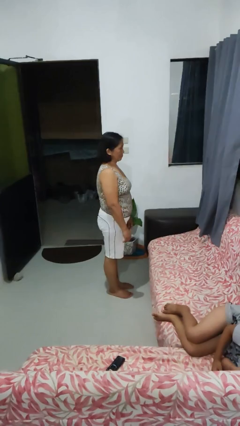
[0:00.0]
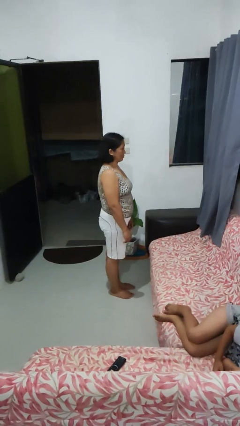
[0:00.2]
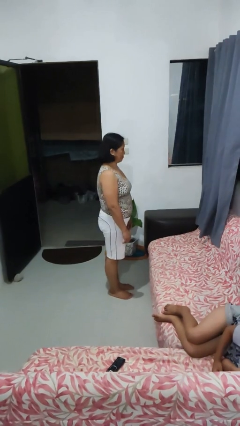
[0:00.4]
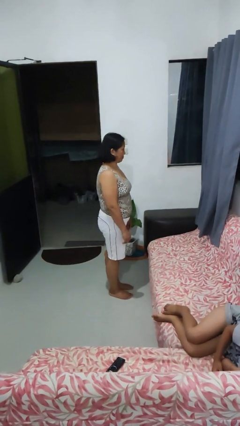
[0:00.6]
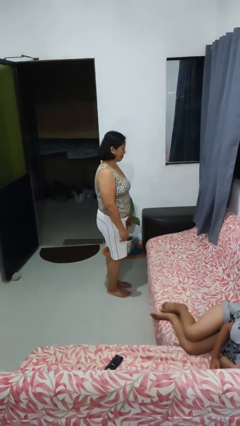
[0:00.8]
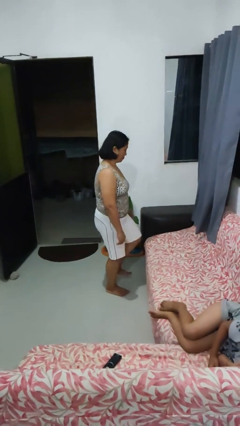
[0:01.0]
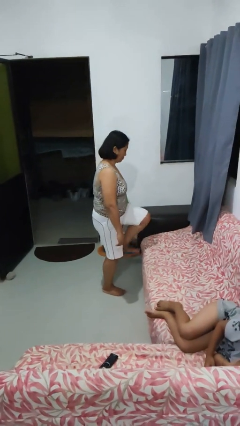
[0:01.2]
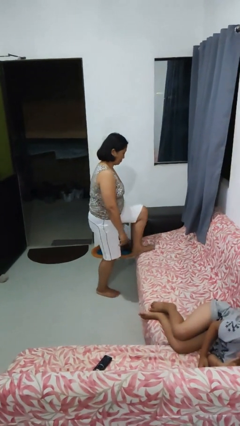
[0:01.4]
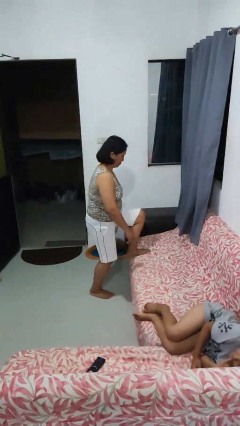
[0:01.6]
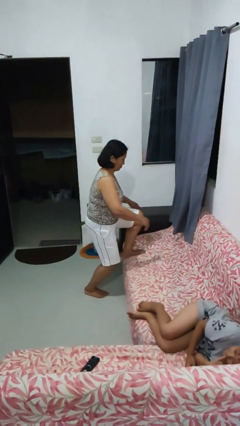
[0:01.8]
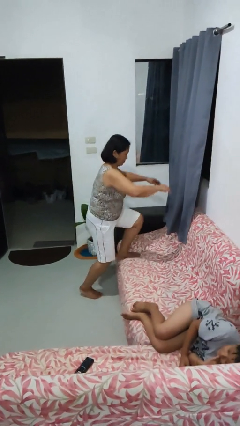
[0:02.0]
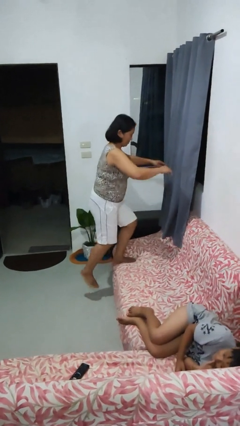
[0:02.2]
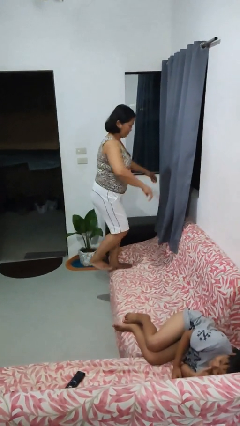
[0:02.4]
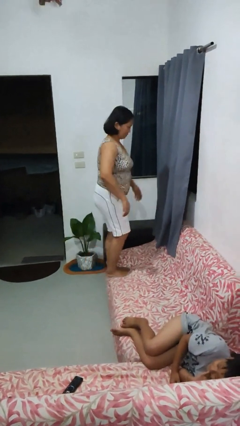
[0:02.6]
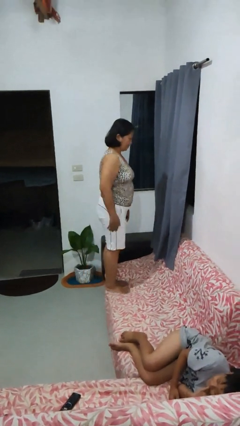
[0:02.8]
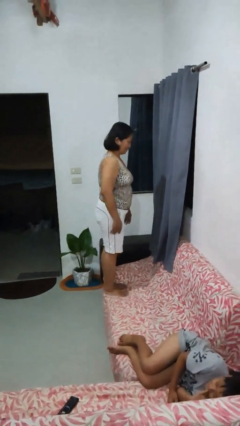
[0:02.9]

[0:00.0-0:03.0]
person climbs on couch

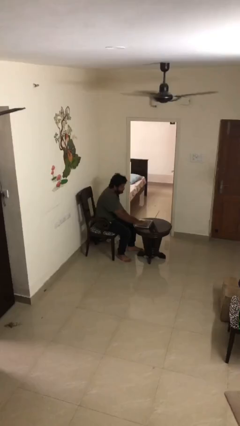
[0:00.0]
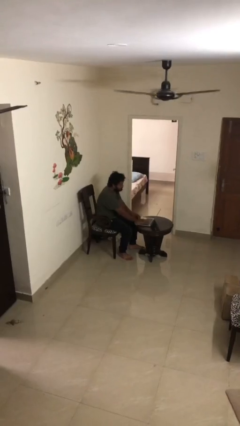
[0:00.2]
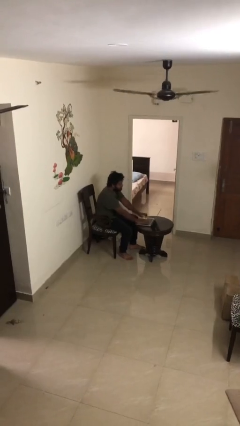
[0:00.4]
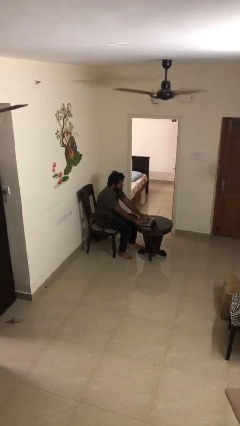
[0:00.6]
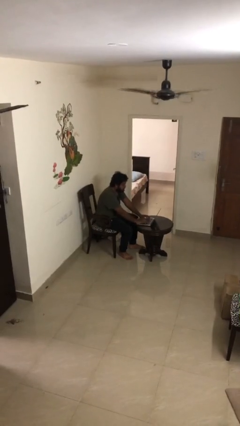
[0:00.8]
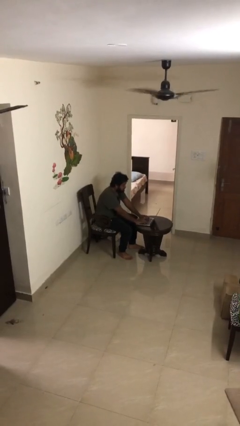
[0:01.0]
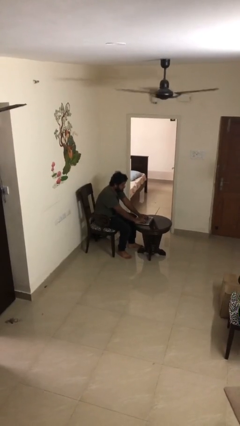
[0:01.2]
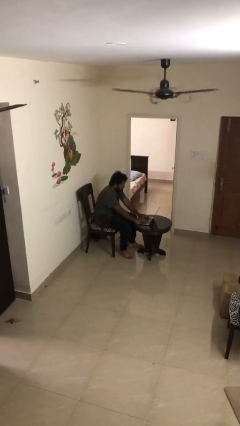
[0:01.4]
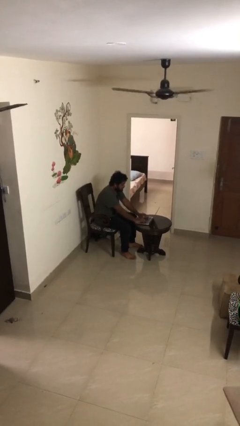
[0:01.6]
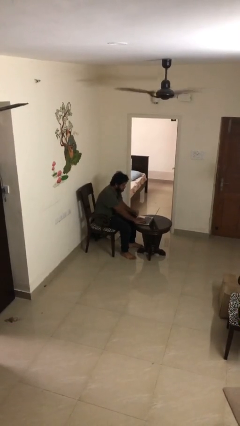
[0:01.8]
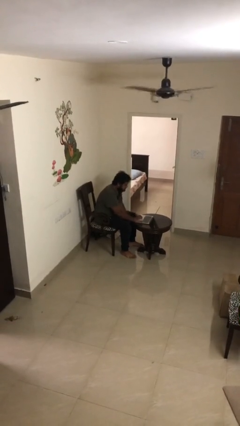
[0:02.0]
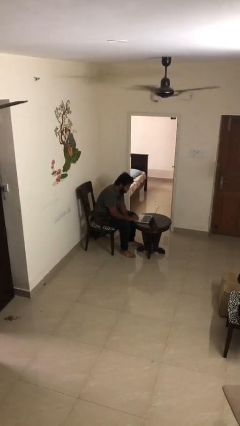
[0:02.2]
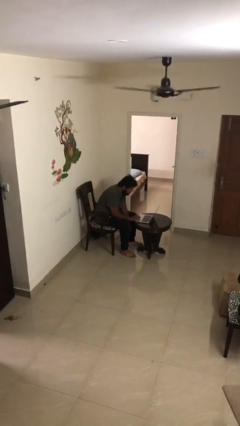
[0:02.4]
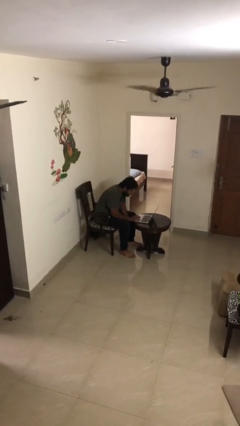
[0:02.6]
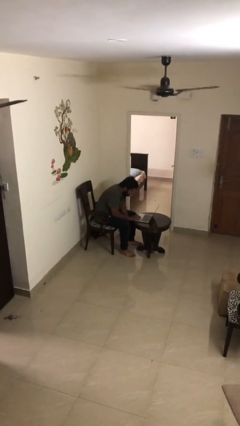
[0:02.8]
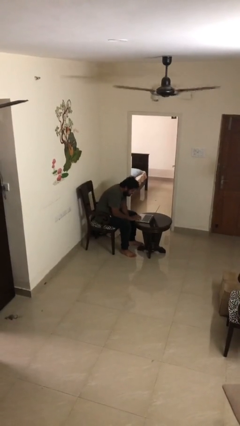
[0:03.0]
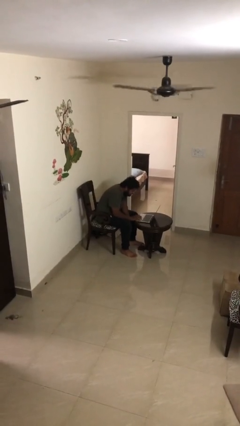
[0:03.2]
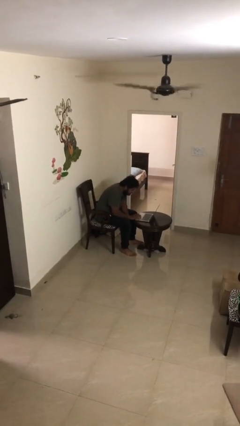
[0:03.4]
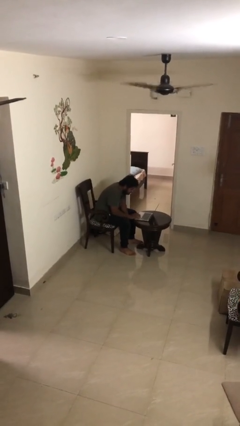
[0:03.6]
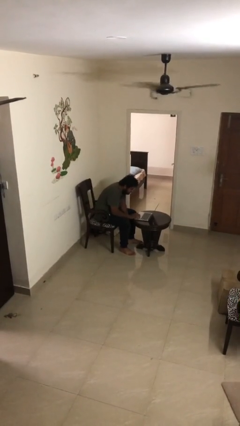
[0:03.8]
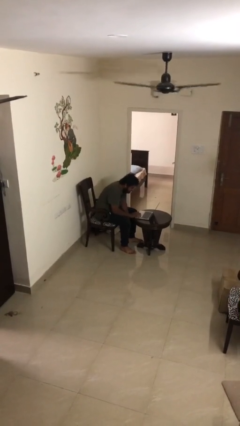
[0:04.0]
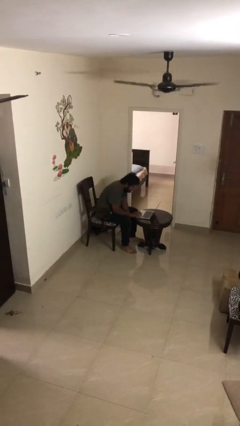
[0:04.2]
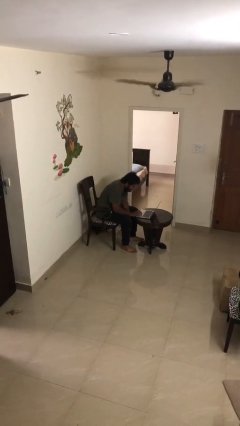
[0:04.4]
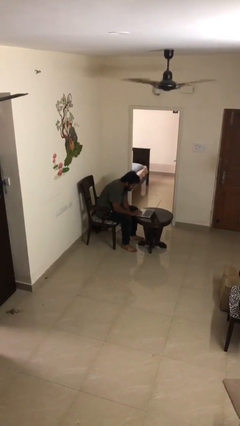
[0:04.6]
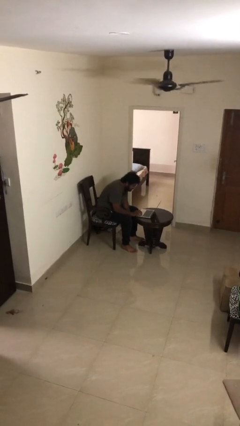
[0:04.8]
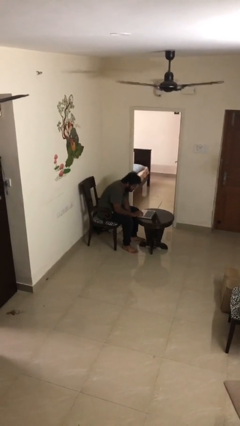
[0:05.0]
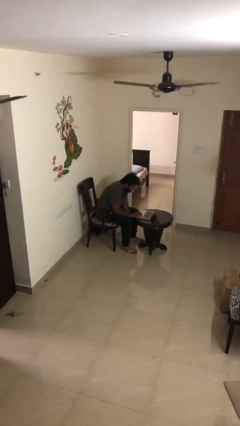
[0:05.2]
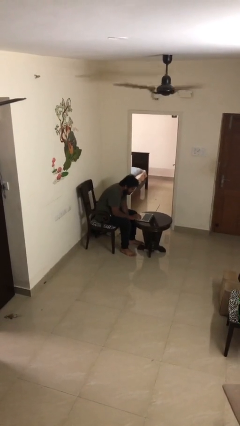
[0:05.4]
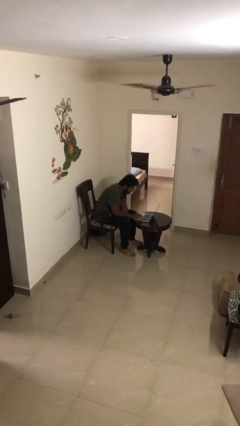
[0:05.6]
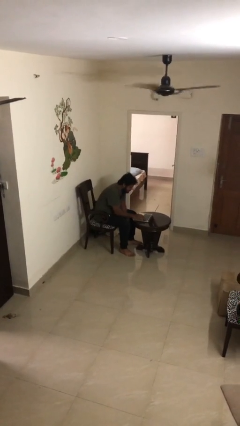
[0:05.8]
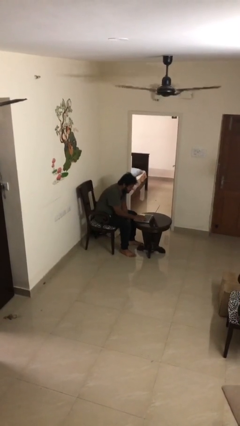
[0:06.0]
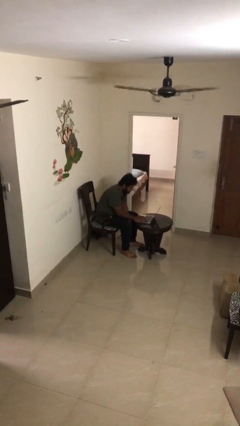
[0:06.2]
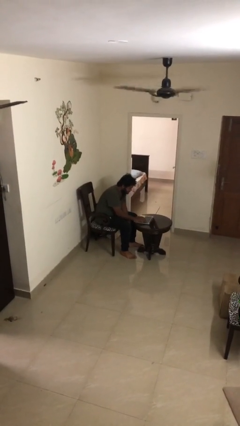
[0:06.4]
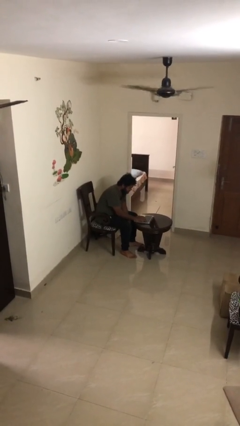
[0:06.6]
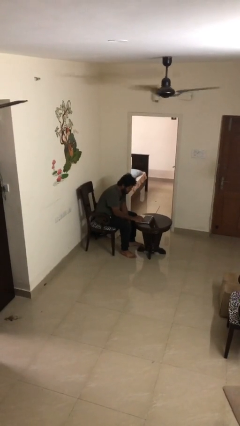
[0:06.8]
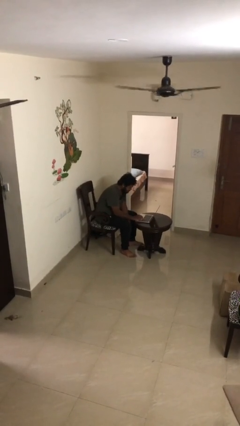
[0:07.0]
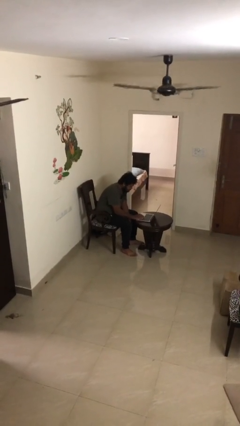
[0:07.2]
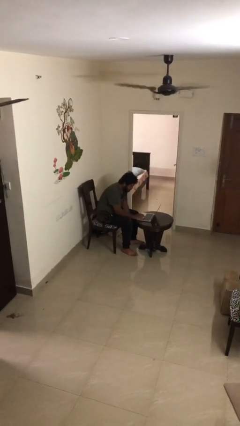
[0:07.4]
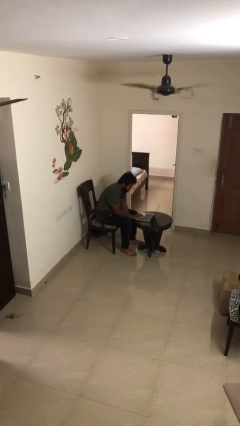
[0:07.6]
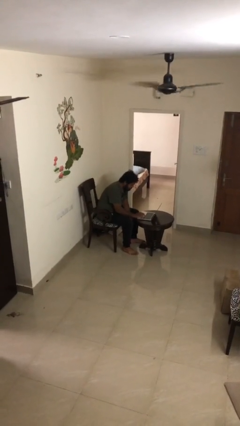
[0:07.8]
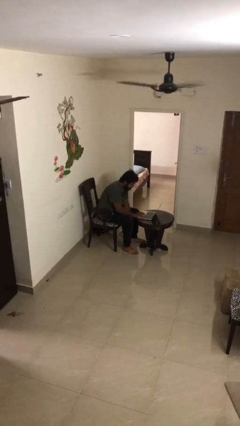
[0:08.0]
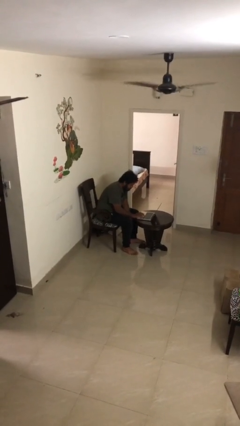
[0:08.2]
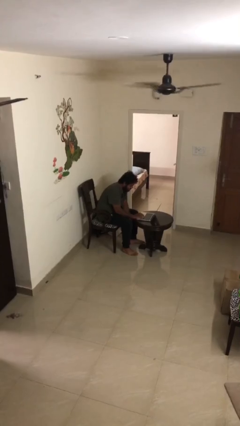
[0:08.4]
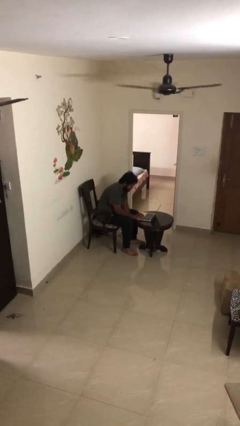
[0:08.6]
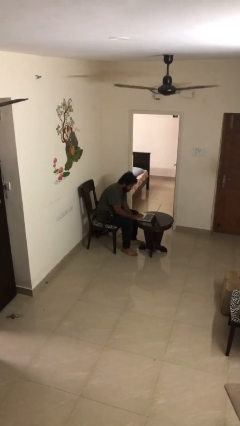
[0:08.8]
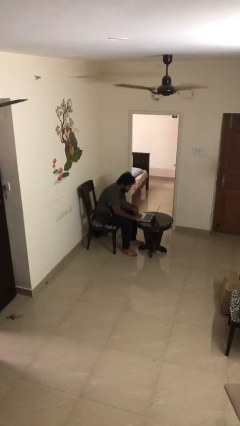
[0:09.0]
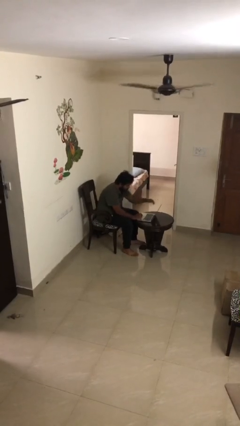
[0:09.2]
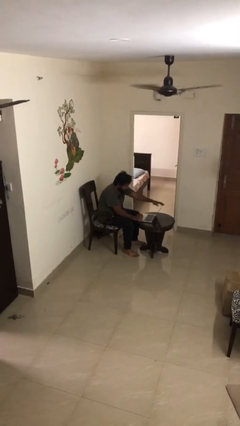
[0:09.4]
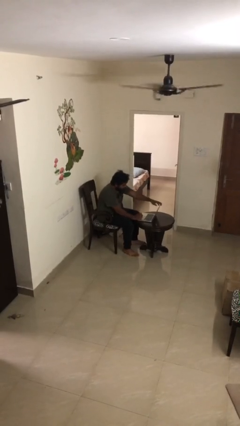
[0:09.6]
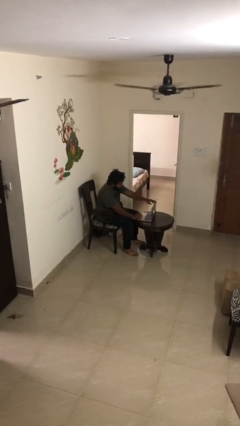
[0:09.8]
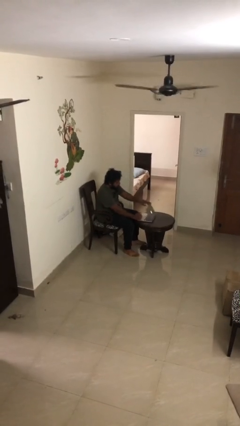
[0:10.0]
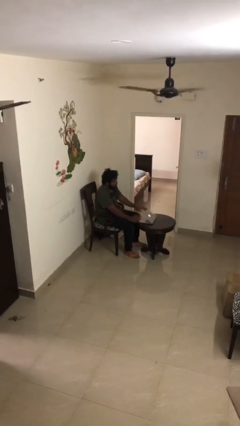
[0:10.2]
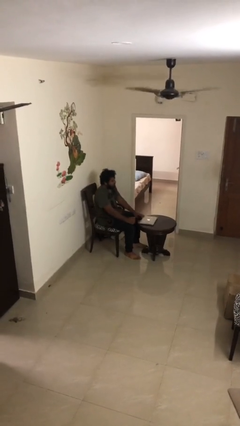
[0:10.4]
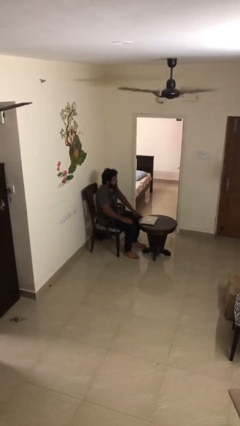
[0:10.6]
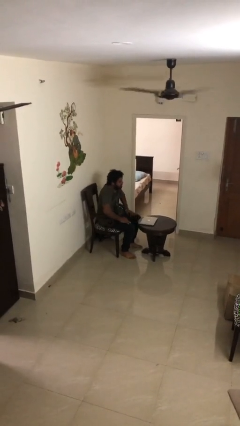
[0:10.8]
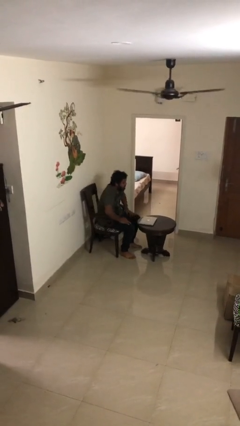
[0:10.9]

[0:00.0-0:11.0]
person interacts with laptop

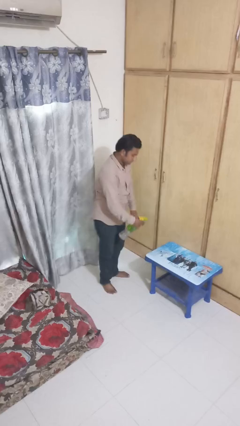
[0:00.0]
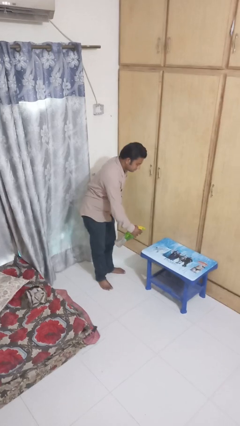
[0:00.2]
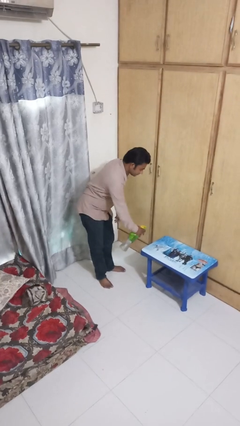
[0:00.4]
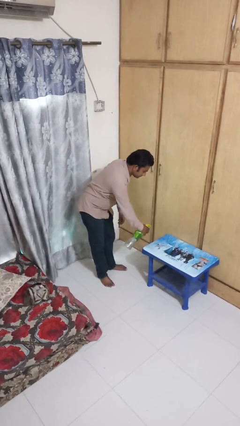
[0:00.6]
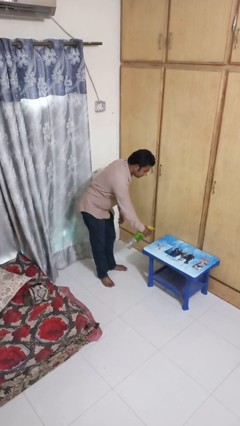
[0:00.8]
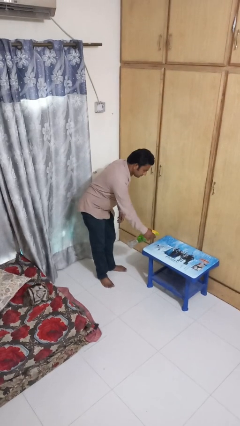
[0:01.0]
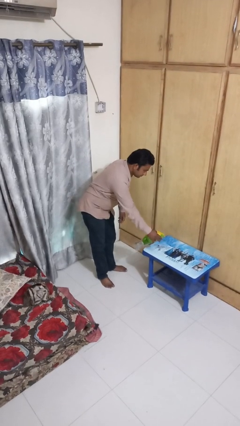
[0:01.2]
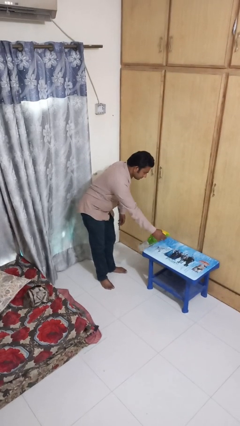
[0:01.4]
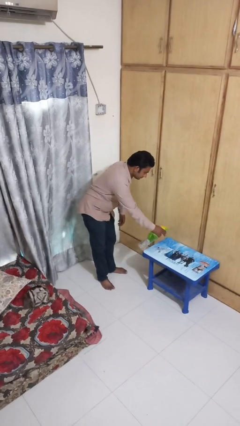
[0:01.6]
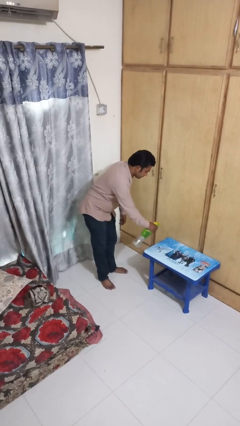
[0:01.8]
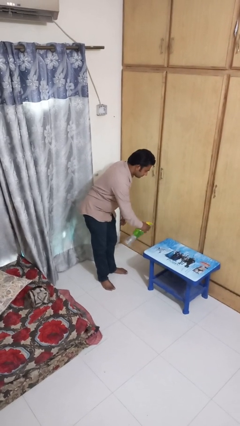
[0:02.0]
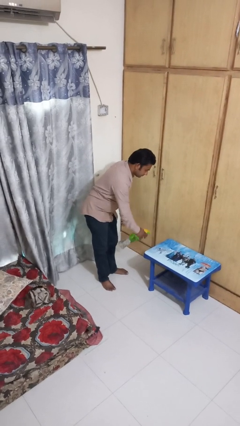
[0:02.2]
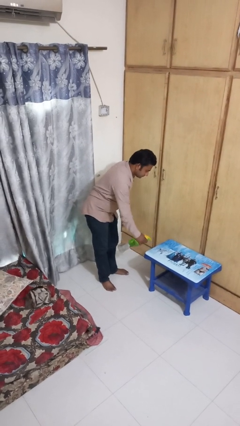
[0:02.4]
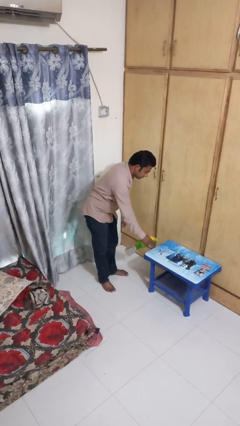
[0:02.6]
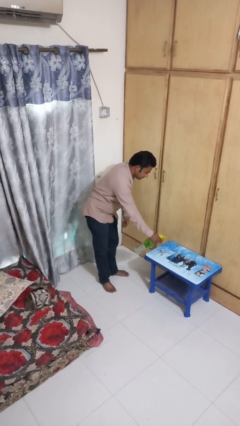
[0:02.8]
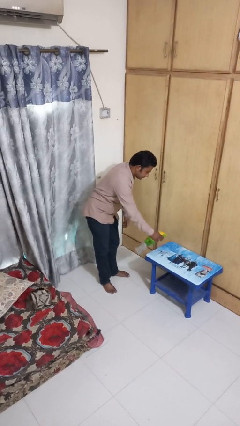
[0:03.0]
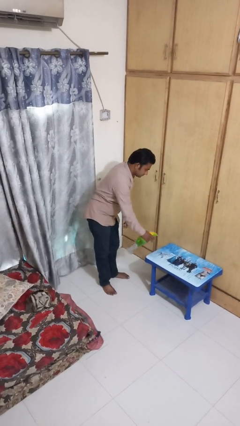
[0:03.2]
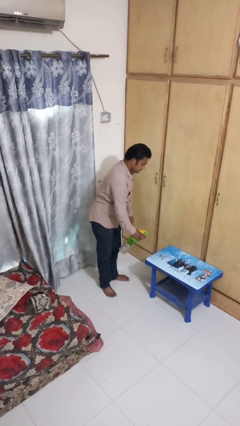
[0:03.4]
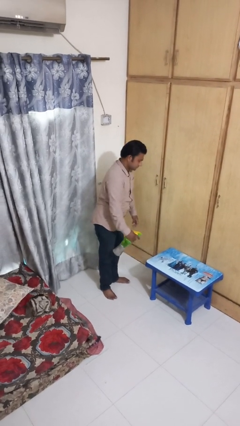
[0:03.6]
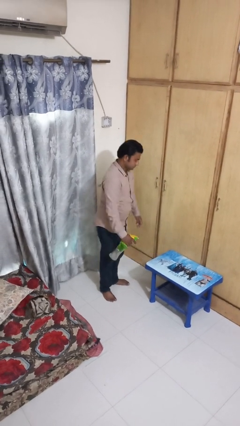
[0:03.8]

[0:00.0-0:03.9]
person sprays from bottle

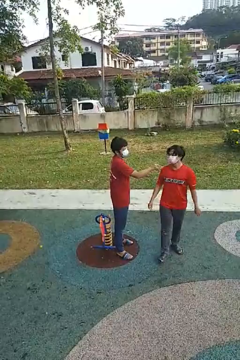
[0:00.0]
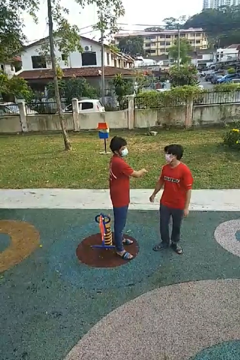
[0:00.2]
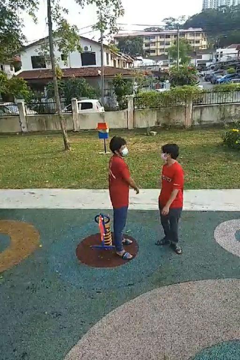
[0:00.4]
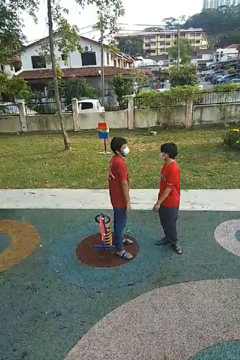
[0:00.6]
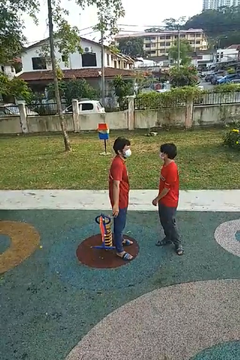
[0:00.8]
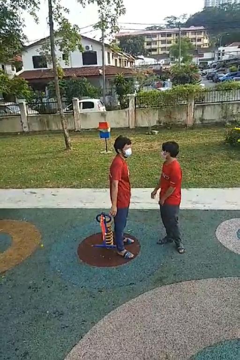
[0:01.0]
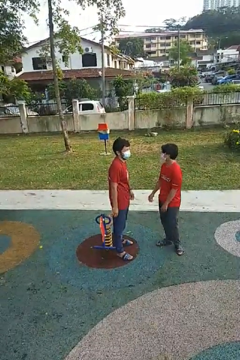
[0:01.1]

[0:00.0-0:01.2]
person spins person around
